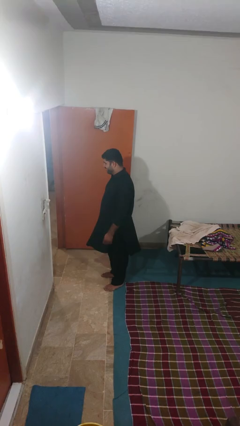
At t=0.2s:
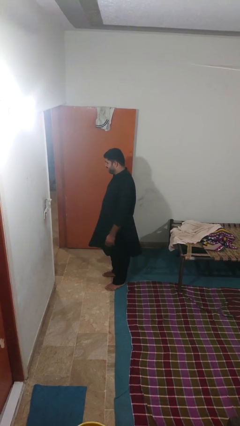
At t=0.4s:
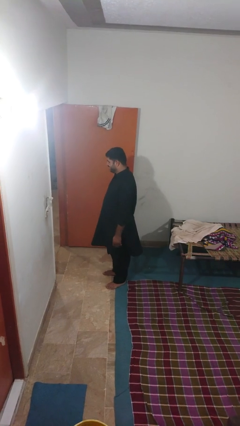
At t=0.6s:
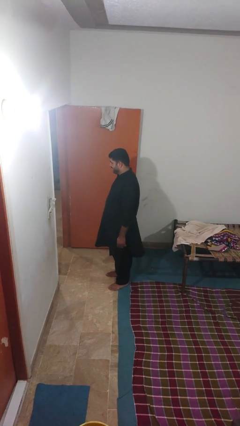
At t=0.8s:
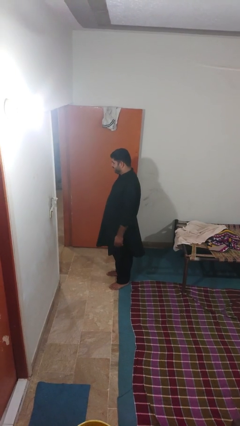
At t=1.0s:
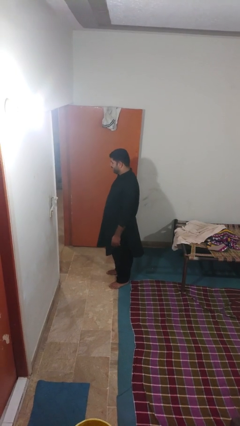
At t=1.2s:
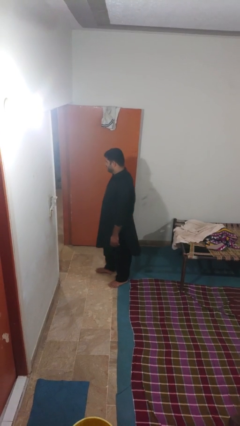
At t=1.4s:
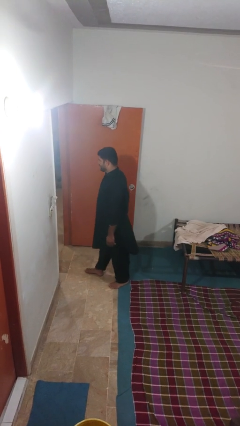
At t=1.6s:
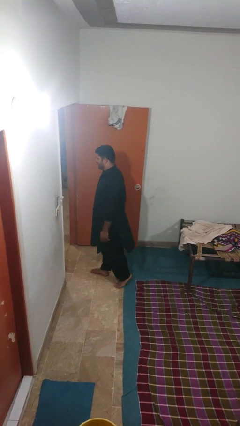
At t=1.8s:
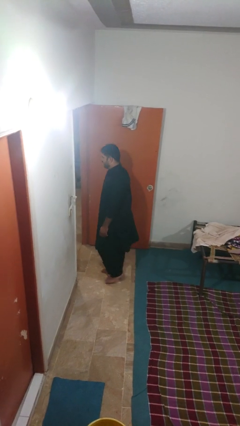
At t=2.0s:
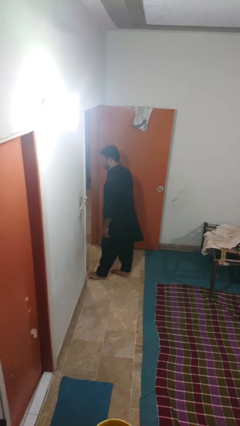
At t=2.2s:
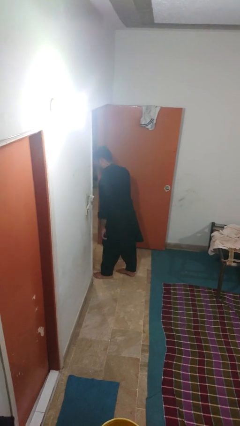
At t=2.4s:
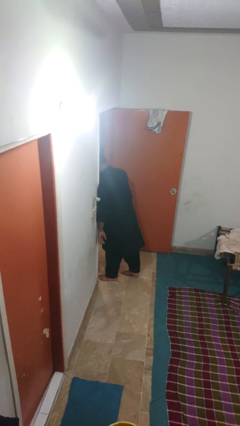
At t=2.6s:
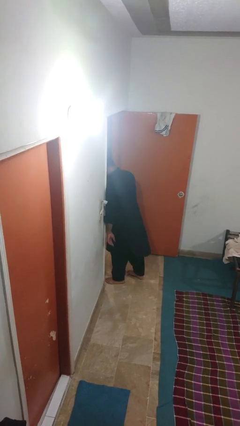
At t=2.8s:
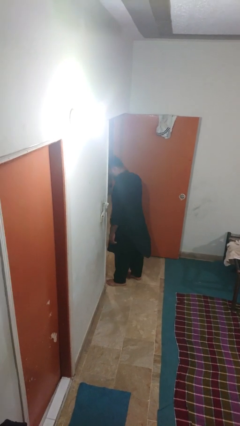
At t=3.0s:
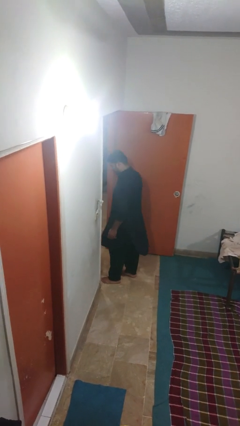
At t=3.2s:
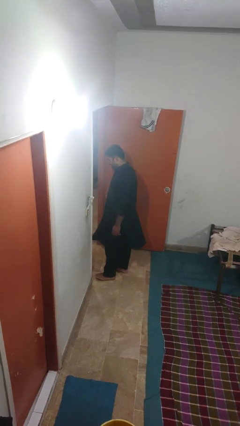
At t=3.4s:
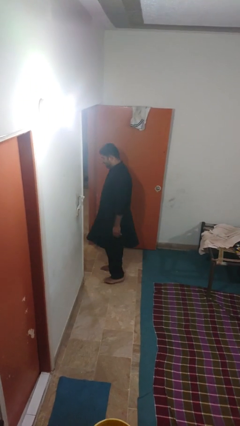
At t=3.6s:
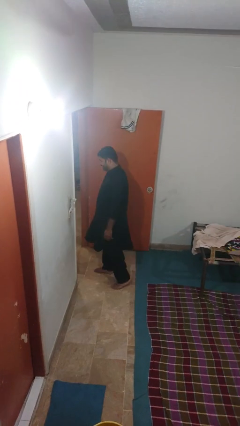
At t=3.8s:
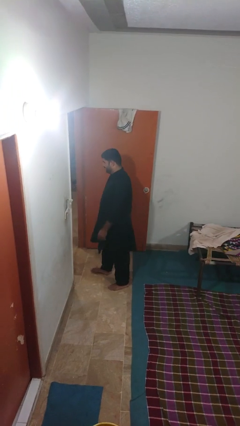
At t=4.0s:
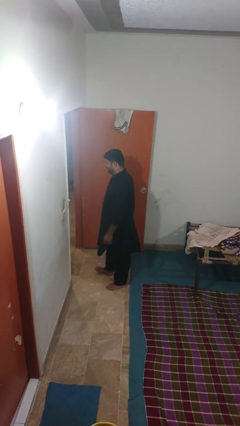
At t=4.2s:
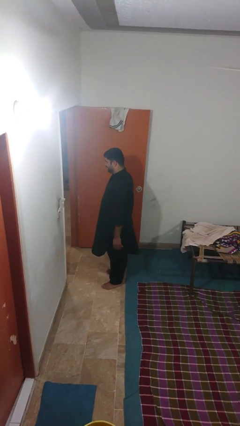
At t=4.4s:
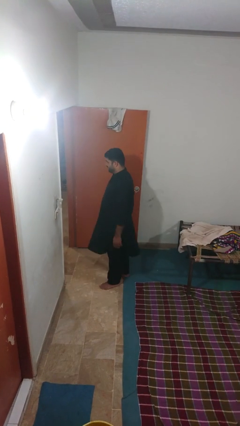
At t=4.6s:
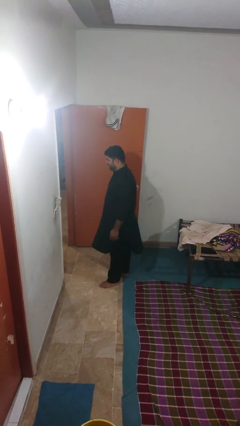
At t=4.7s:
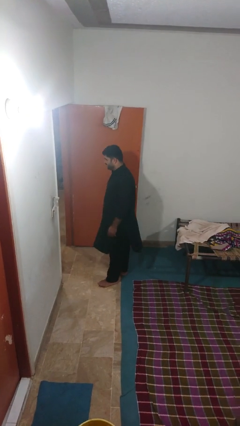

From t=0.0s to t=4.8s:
person bumps into wall

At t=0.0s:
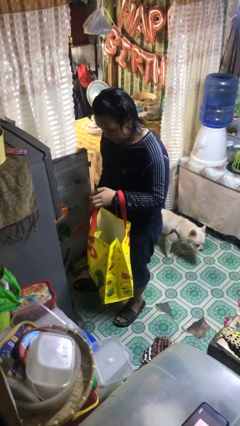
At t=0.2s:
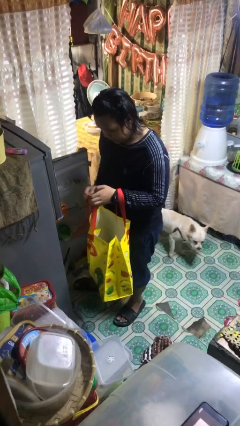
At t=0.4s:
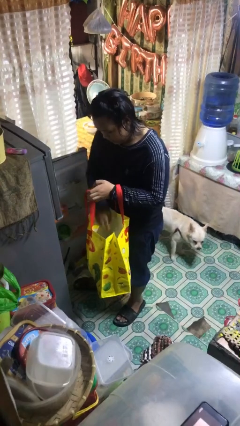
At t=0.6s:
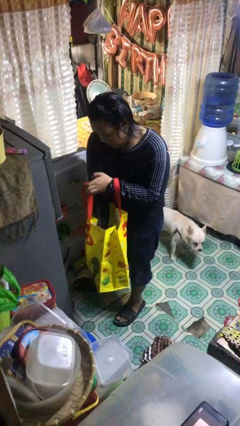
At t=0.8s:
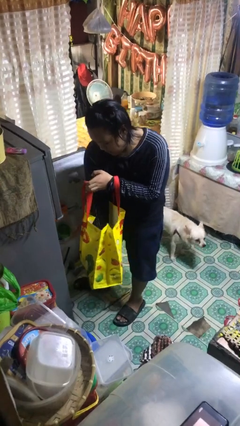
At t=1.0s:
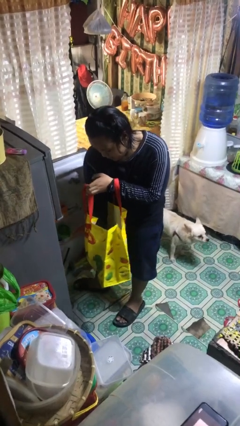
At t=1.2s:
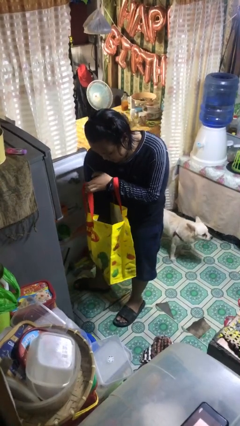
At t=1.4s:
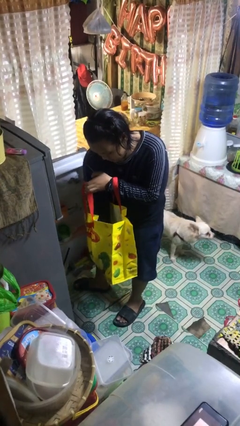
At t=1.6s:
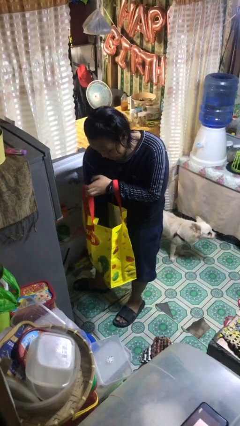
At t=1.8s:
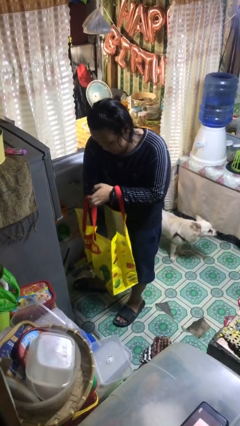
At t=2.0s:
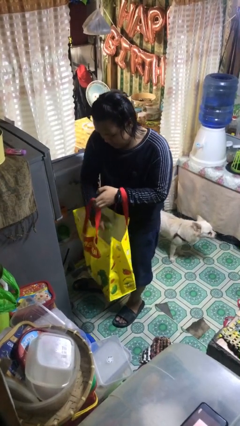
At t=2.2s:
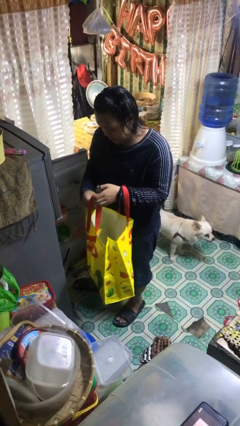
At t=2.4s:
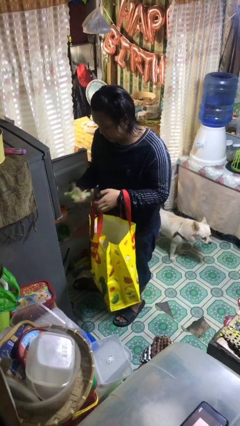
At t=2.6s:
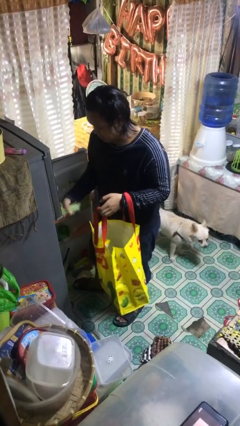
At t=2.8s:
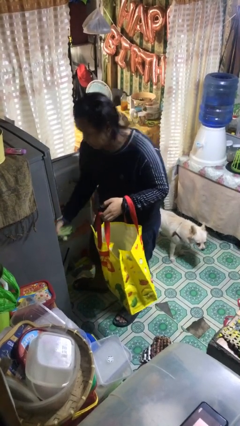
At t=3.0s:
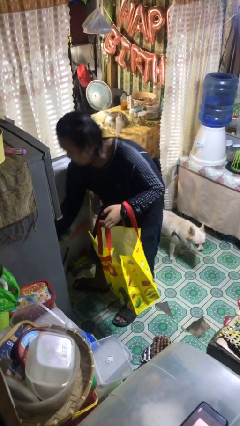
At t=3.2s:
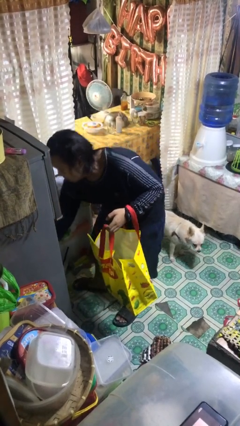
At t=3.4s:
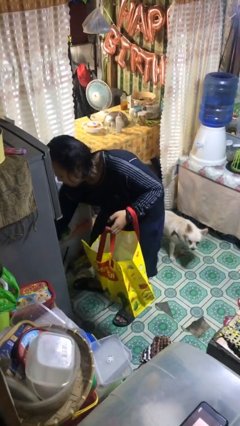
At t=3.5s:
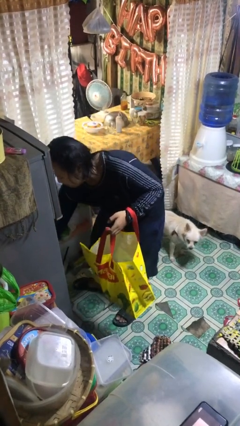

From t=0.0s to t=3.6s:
person loads groceries into refrigerator

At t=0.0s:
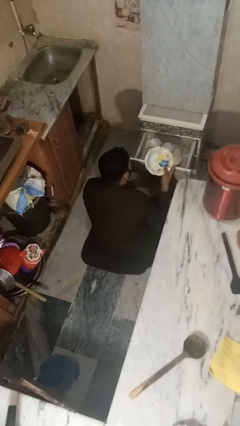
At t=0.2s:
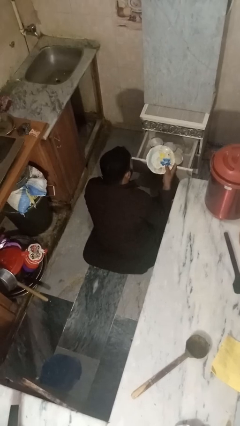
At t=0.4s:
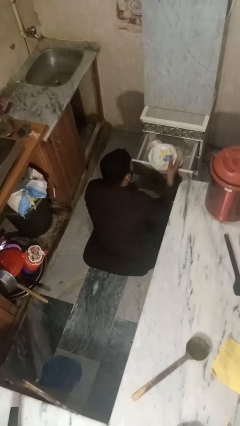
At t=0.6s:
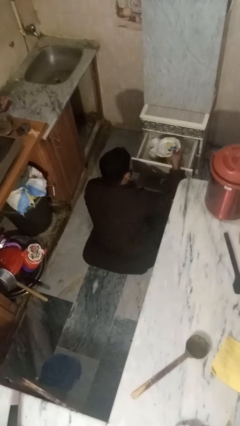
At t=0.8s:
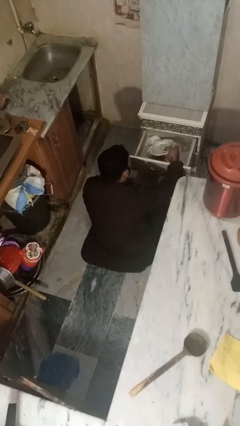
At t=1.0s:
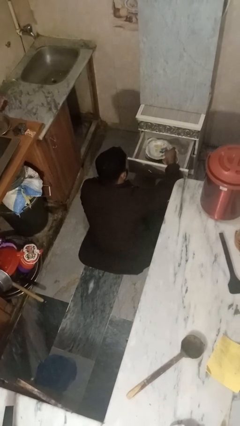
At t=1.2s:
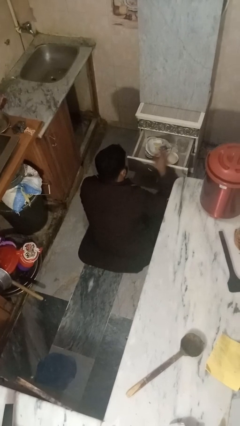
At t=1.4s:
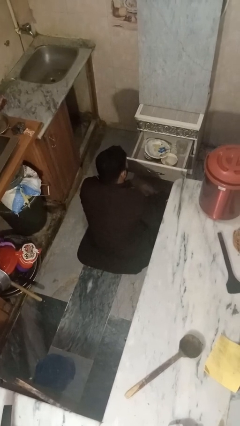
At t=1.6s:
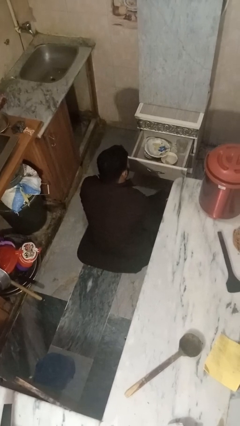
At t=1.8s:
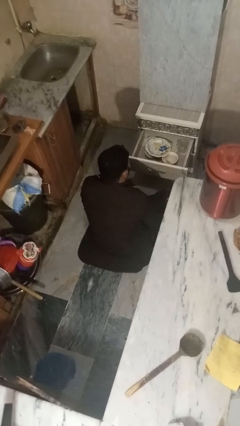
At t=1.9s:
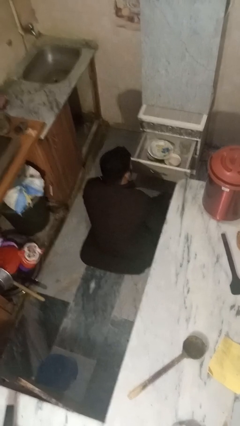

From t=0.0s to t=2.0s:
person puts object into kitchen drawer

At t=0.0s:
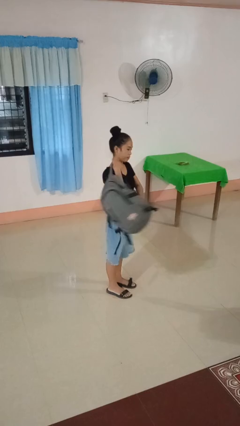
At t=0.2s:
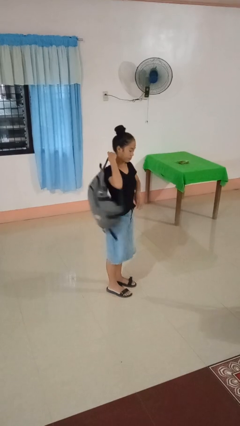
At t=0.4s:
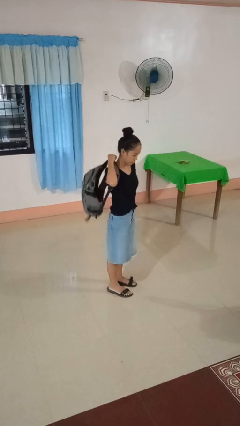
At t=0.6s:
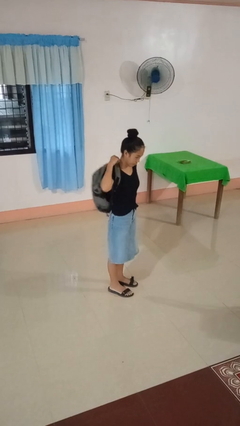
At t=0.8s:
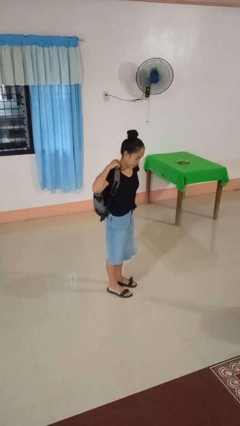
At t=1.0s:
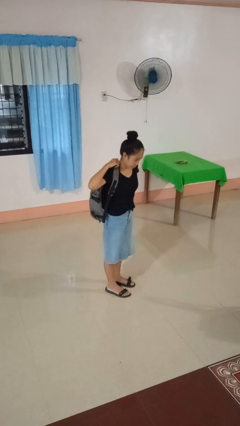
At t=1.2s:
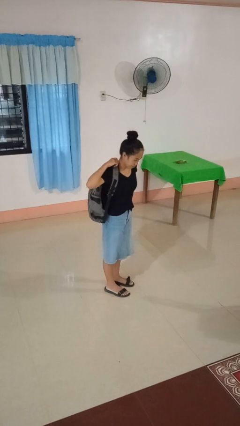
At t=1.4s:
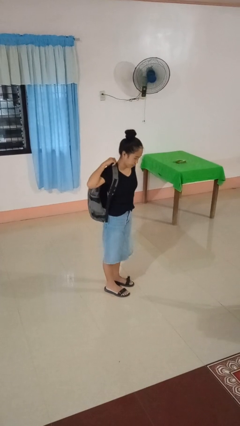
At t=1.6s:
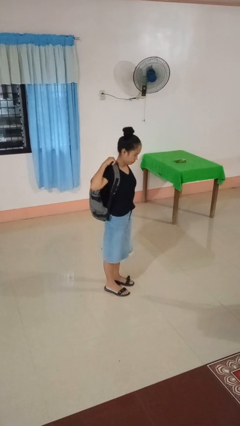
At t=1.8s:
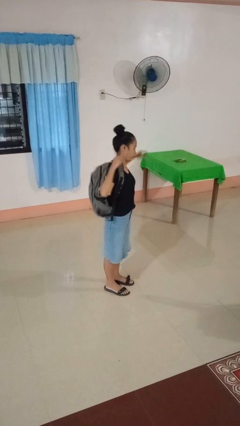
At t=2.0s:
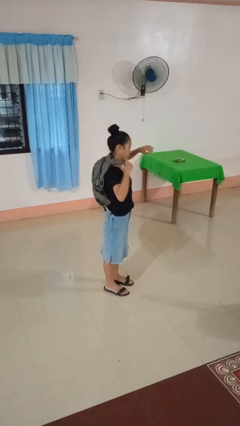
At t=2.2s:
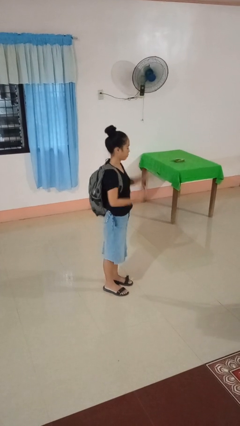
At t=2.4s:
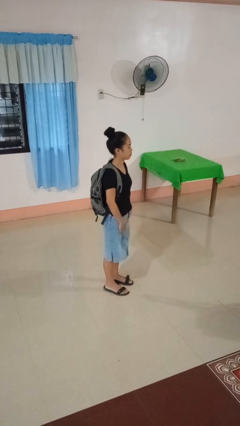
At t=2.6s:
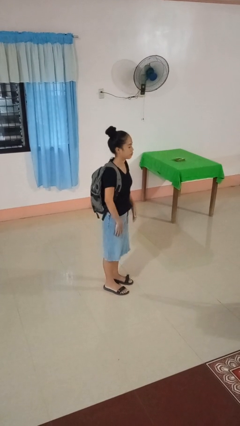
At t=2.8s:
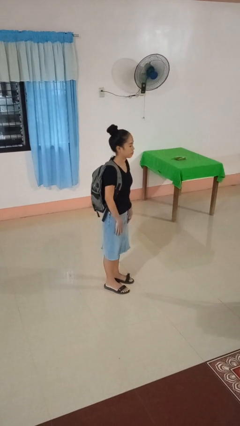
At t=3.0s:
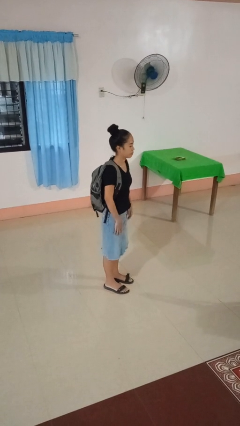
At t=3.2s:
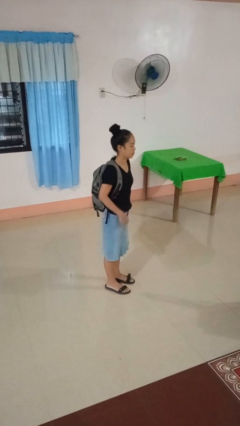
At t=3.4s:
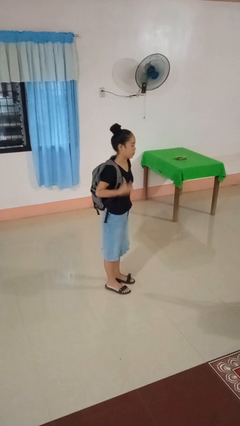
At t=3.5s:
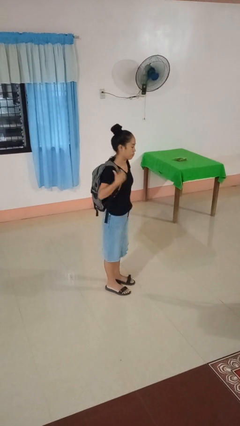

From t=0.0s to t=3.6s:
person puts on backpack

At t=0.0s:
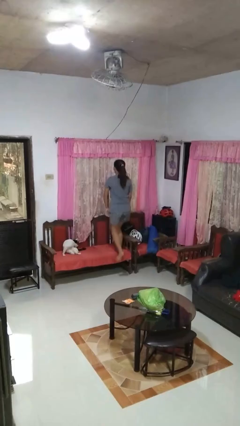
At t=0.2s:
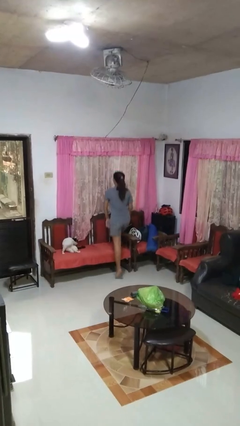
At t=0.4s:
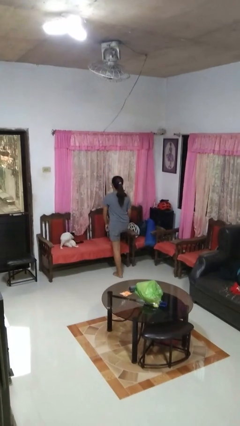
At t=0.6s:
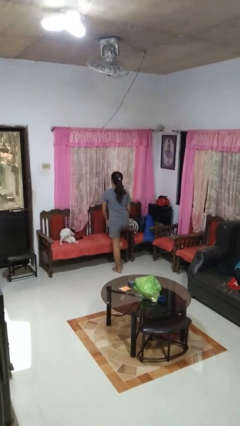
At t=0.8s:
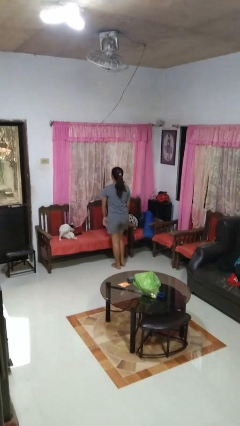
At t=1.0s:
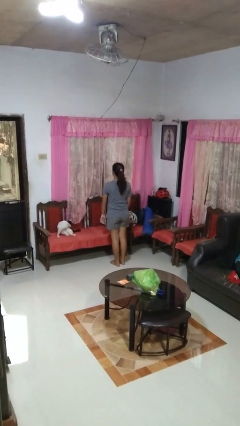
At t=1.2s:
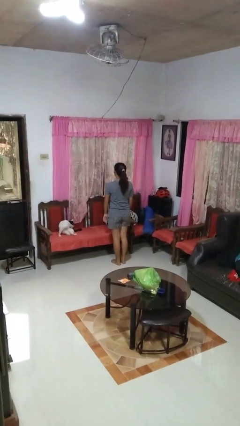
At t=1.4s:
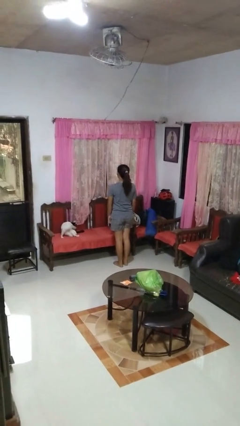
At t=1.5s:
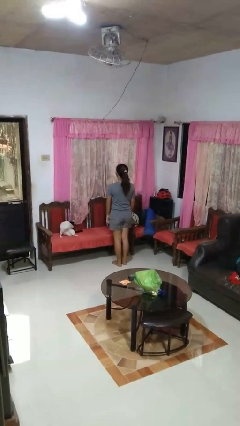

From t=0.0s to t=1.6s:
person climbs off chair

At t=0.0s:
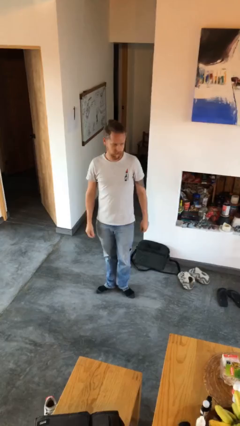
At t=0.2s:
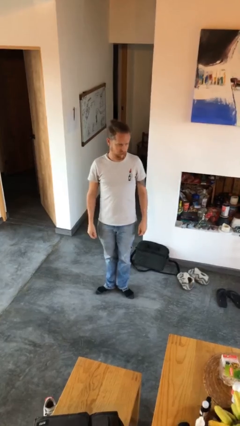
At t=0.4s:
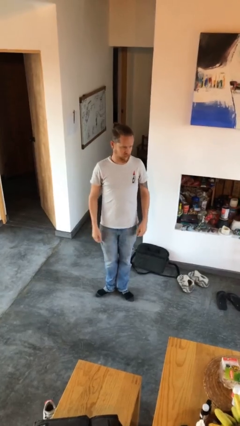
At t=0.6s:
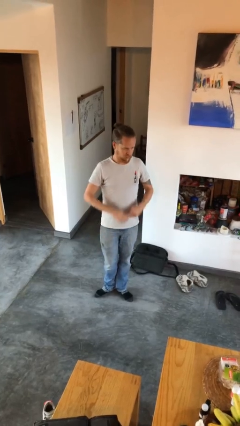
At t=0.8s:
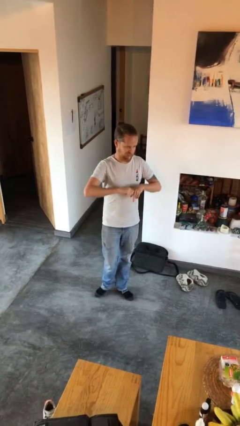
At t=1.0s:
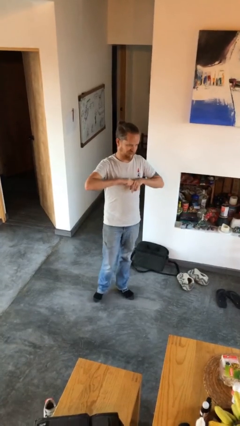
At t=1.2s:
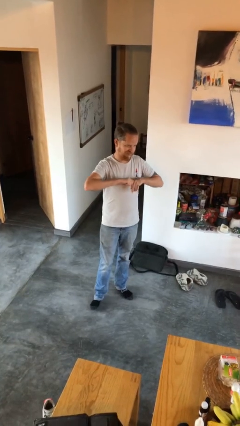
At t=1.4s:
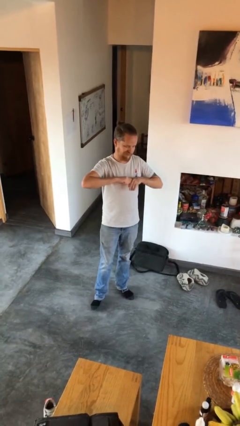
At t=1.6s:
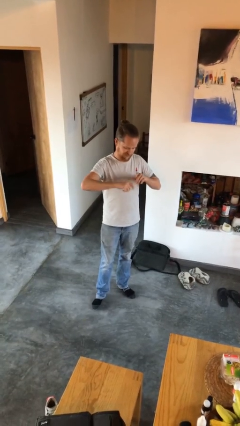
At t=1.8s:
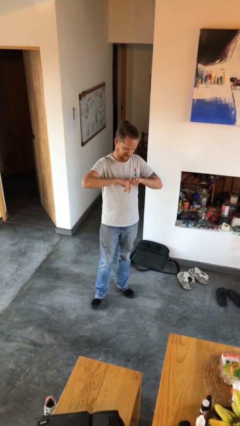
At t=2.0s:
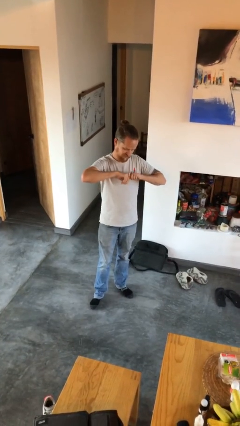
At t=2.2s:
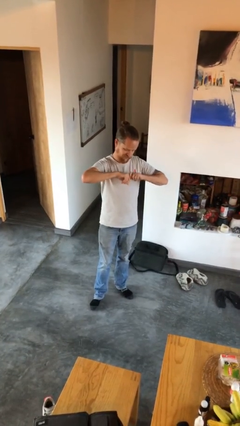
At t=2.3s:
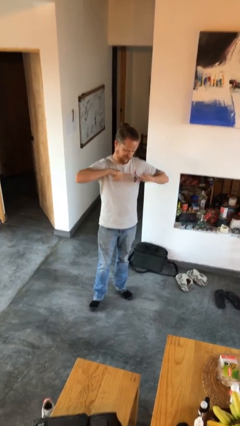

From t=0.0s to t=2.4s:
person cracks knuckles
